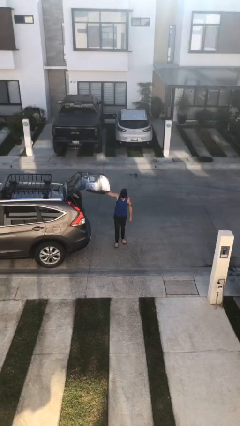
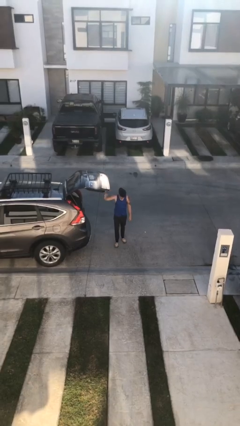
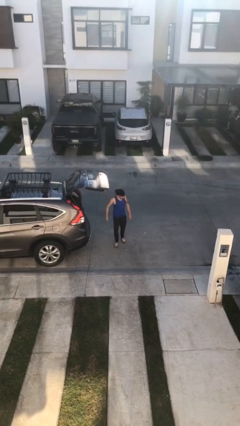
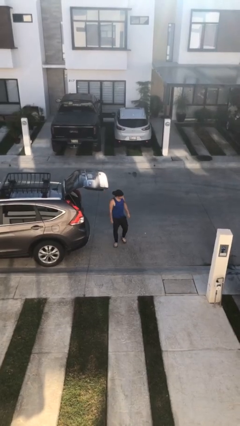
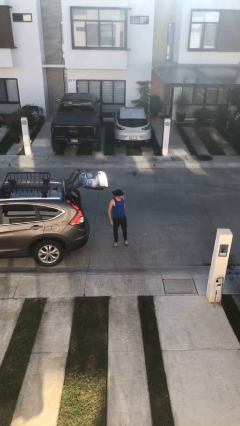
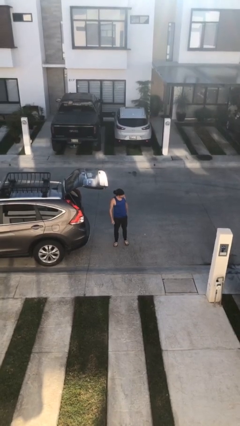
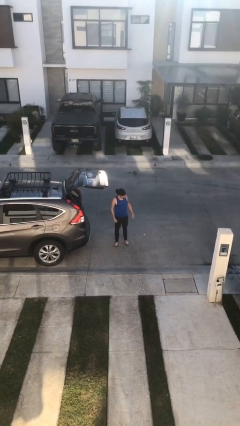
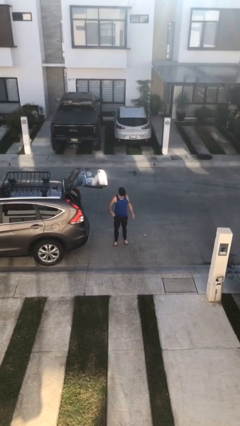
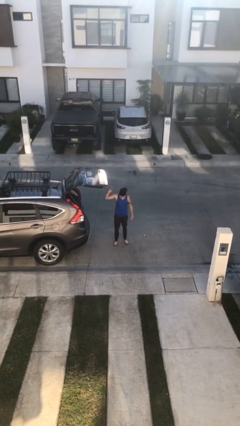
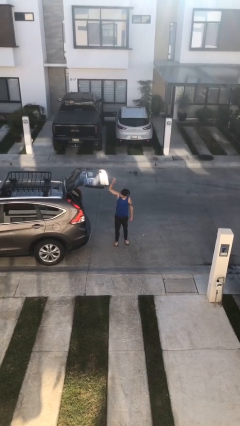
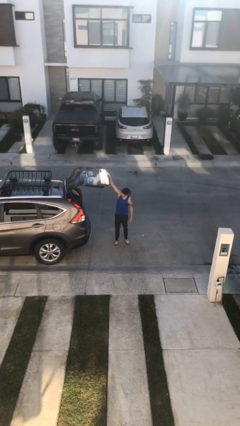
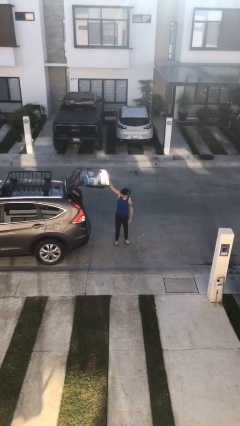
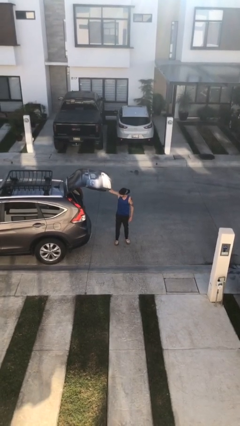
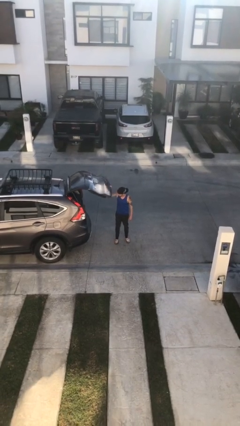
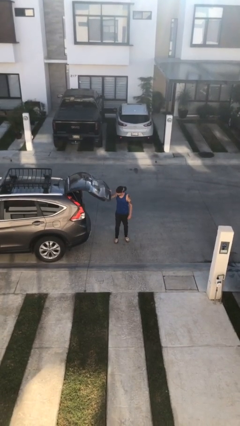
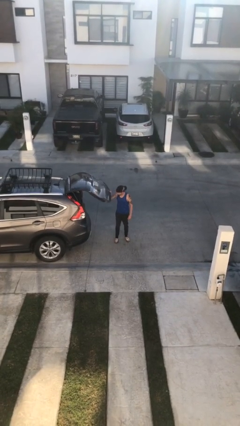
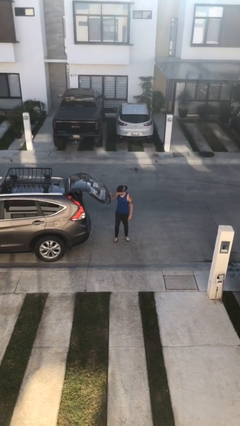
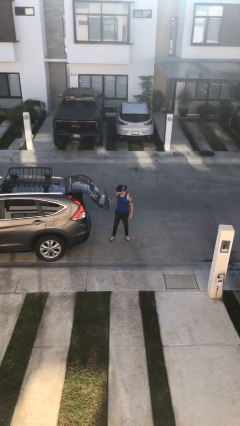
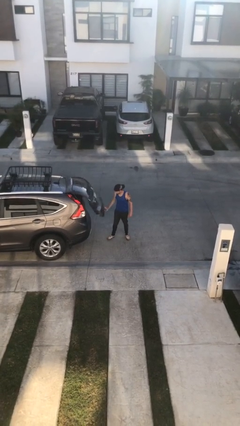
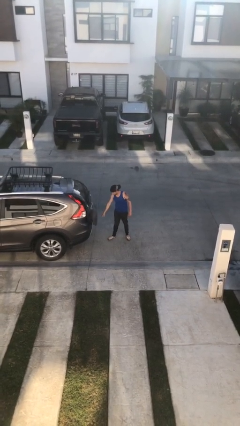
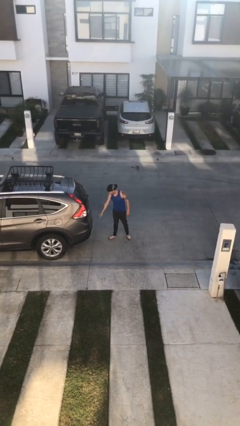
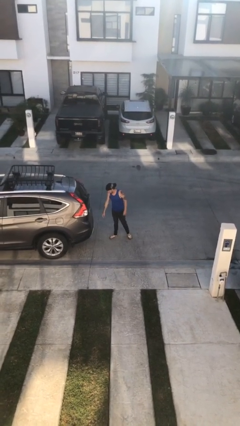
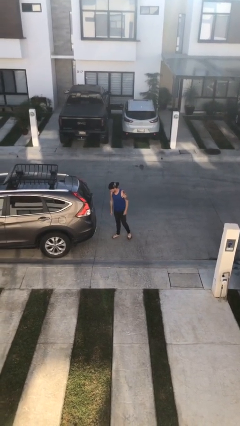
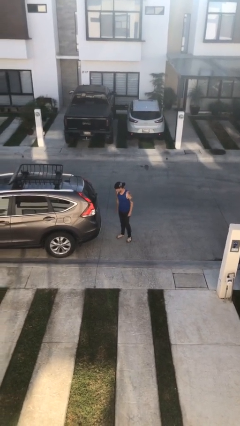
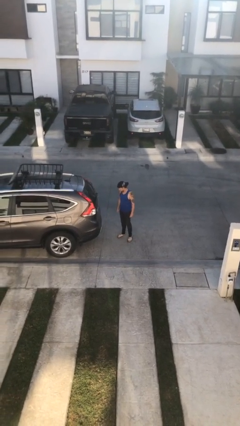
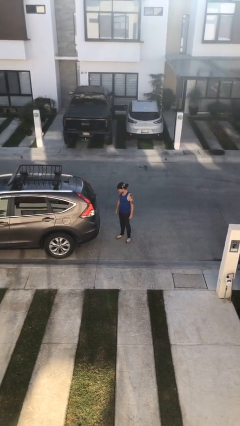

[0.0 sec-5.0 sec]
person closes car trunk

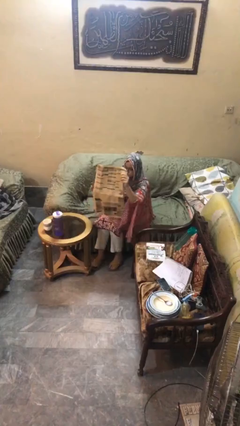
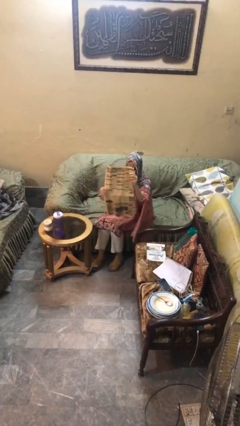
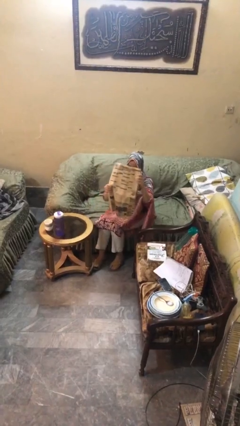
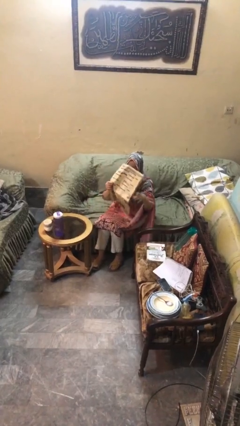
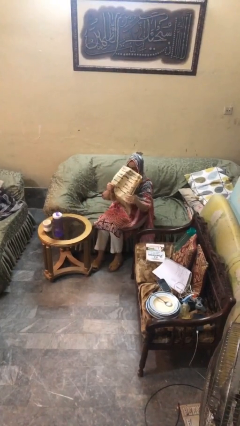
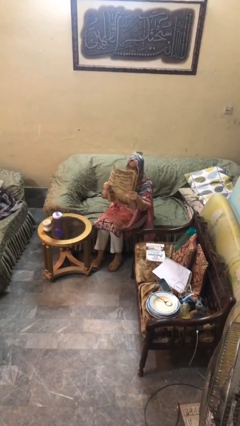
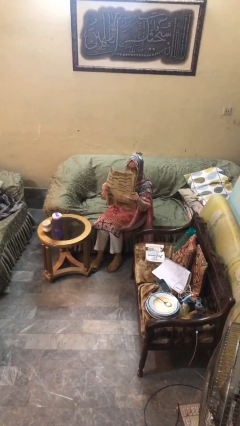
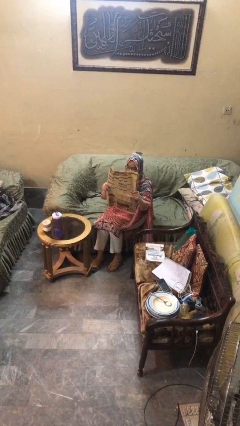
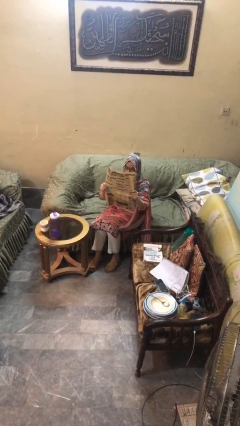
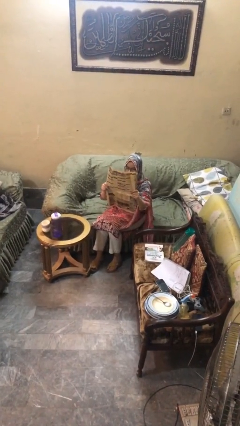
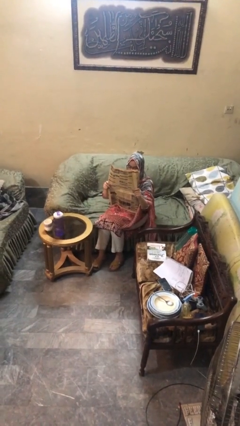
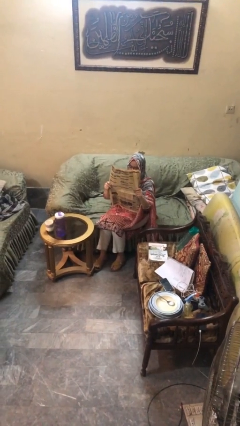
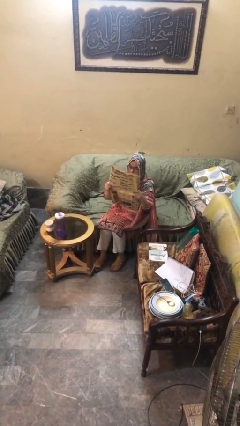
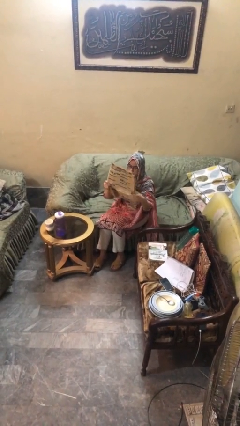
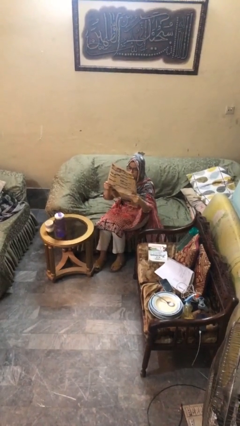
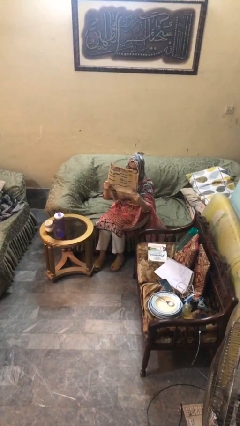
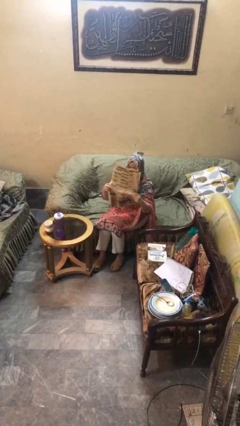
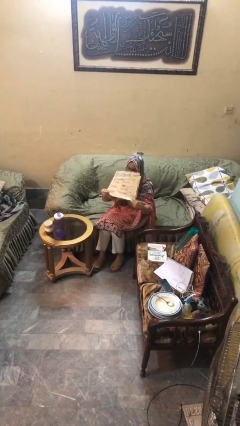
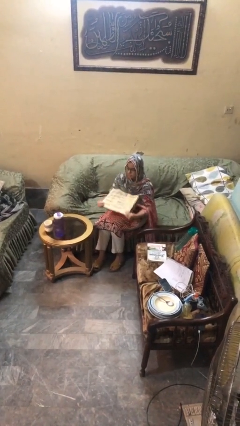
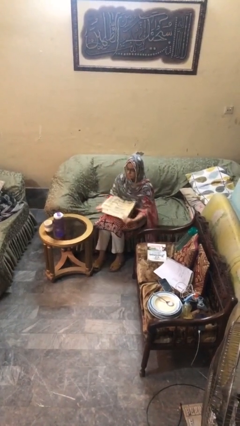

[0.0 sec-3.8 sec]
person reads newspaper

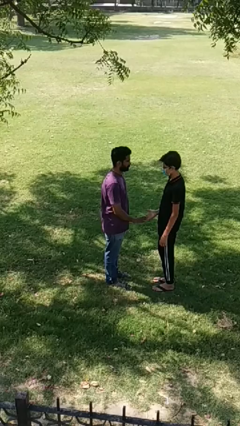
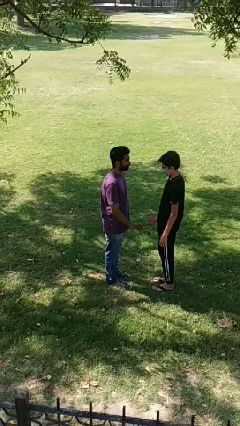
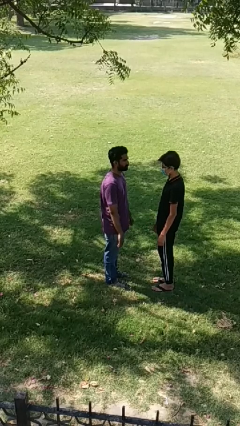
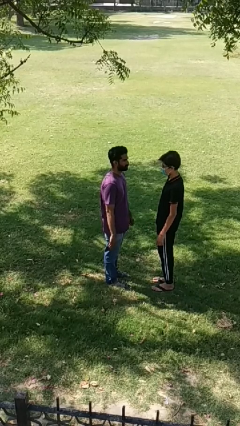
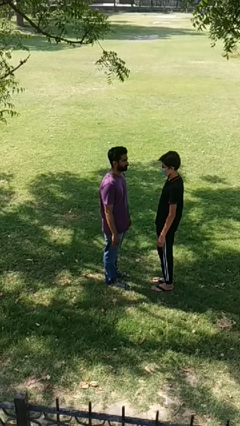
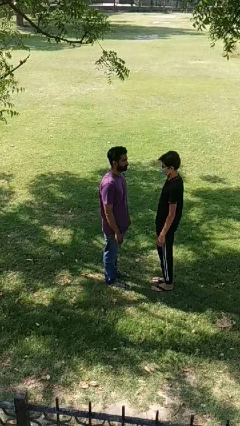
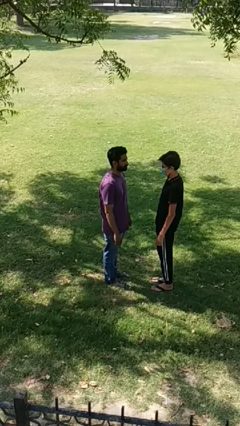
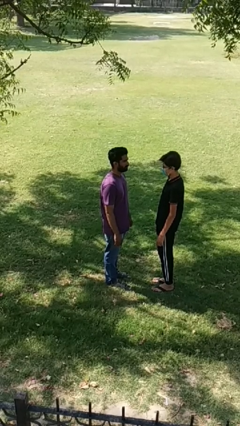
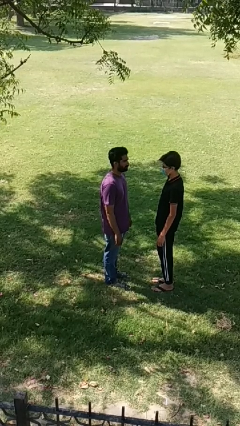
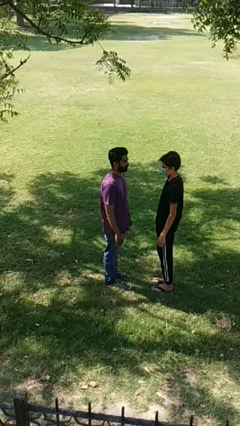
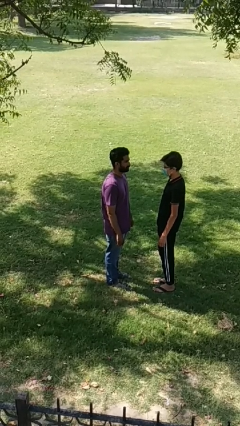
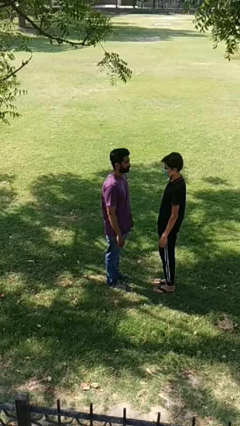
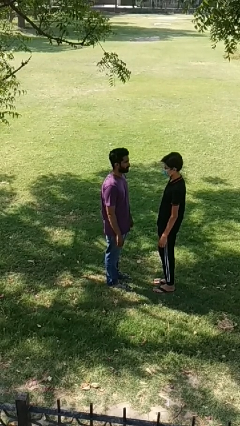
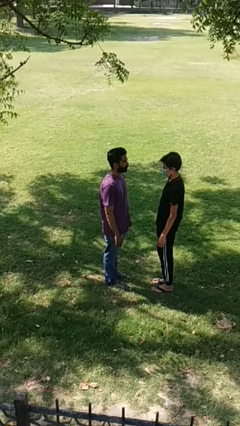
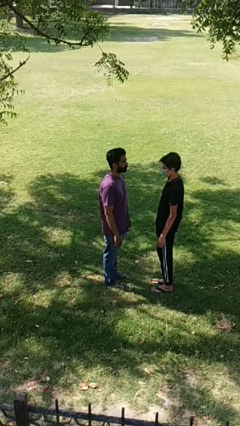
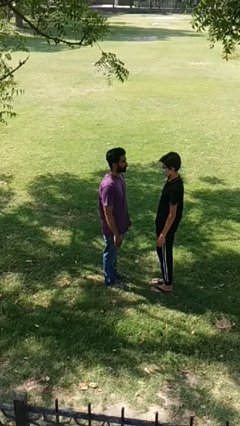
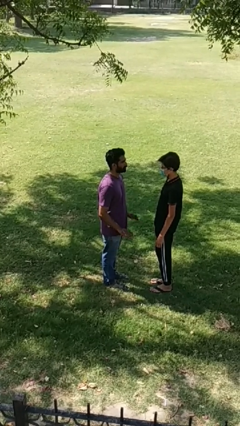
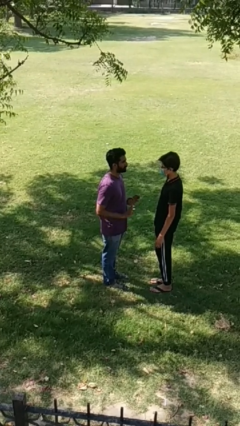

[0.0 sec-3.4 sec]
person highfives hand

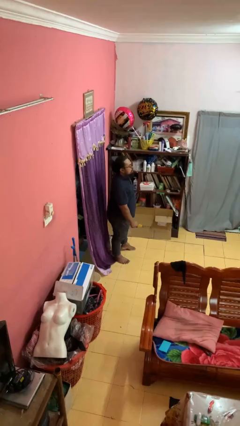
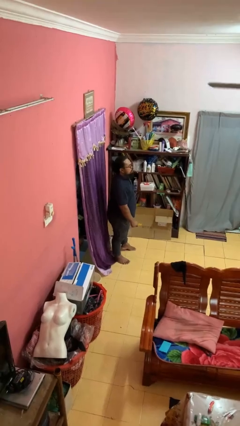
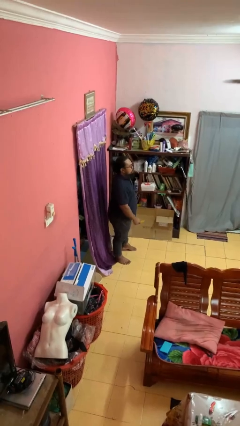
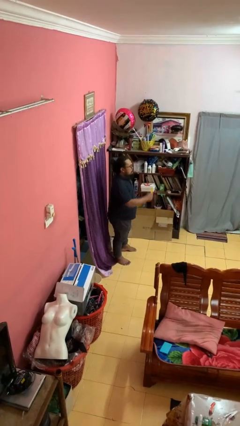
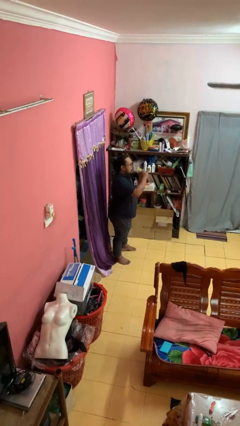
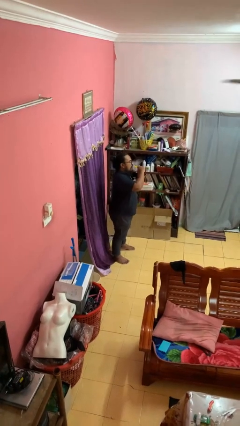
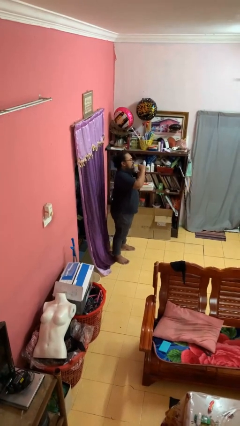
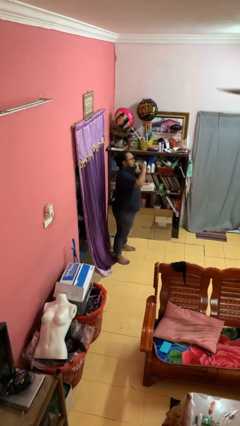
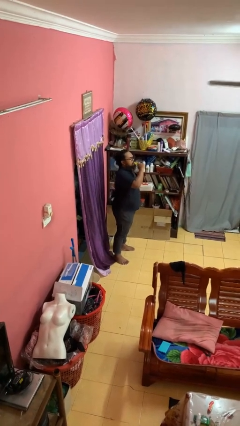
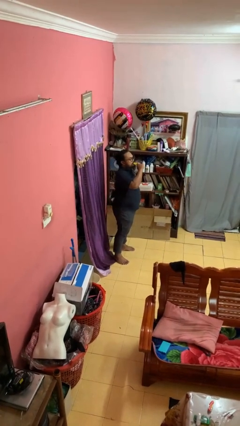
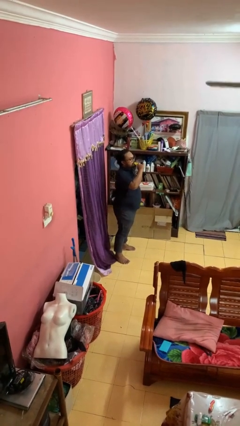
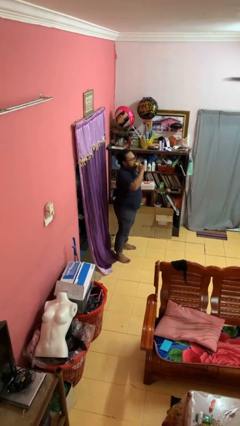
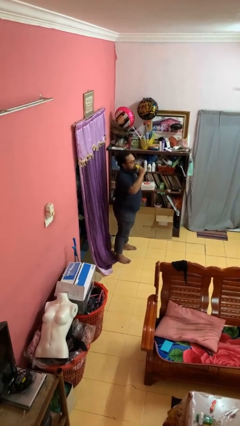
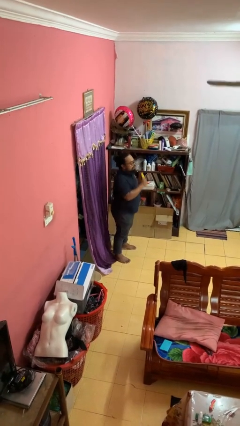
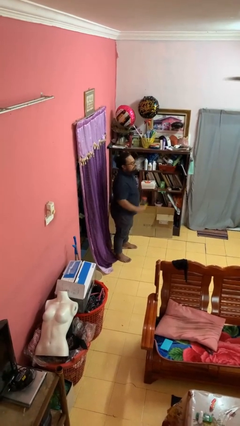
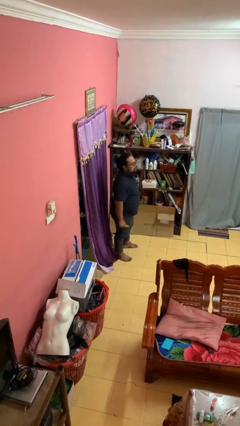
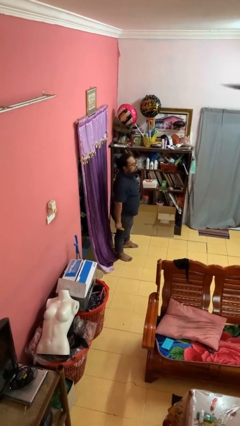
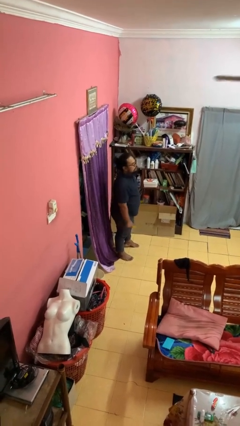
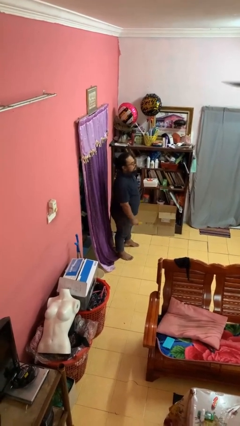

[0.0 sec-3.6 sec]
person eats banana

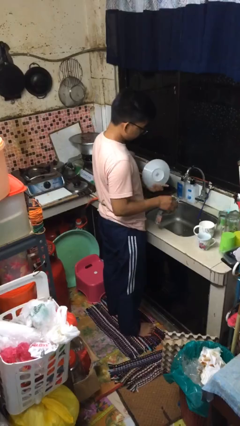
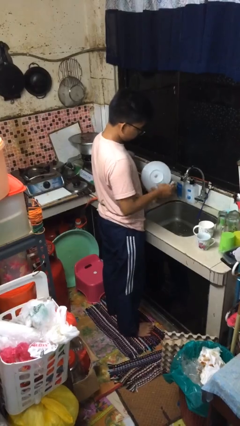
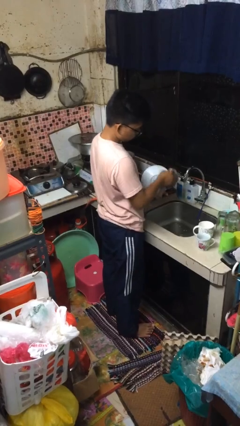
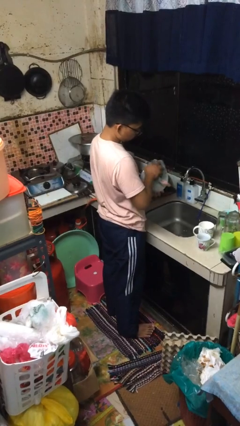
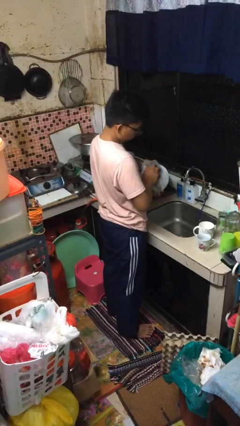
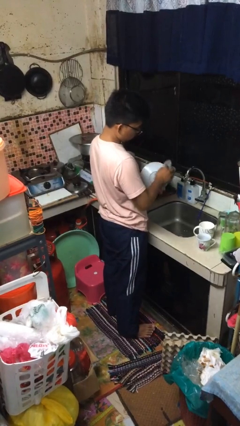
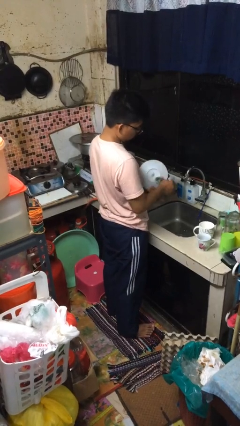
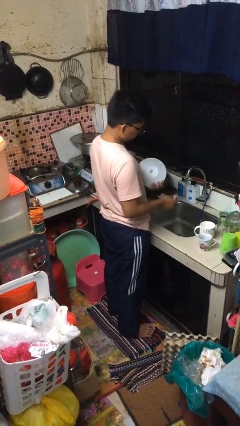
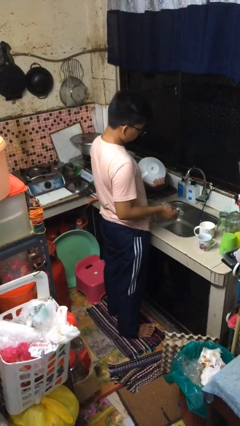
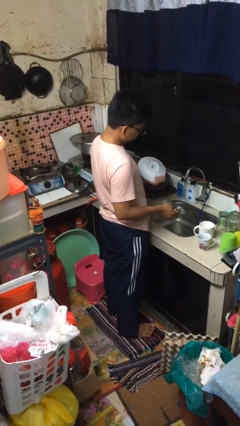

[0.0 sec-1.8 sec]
person dries dish
